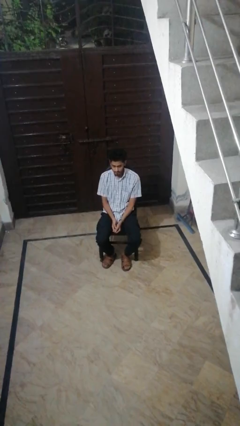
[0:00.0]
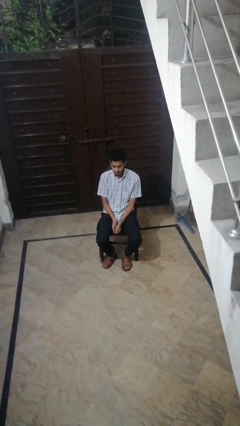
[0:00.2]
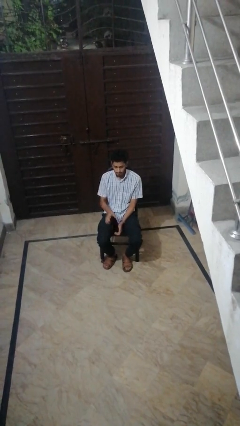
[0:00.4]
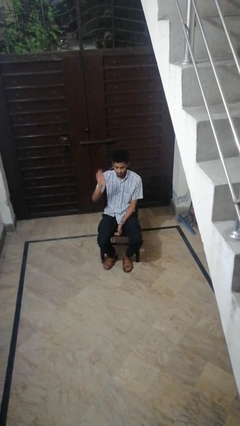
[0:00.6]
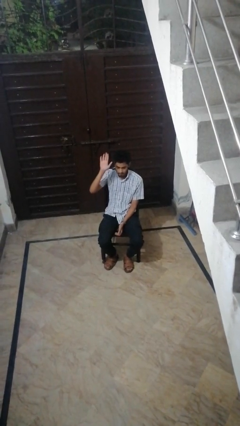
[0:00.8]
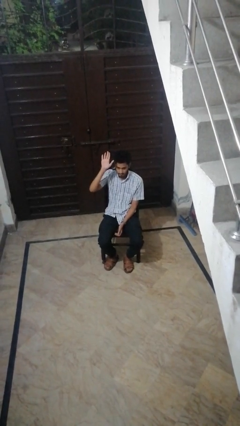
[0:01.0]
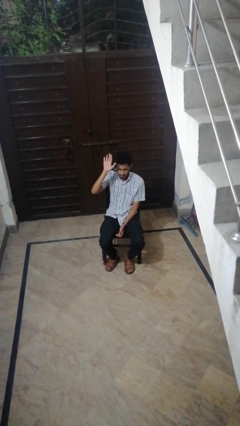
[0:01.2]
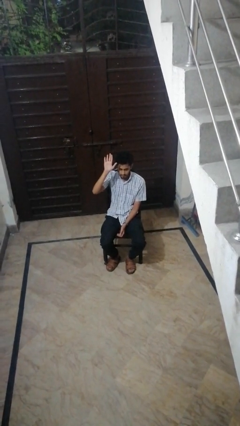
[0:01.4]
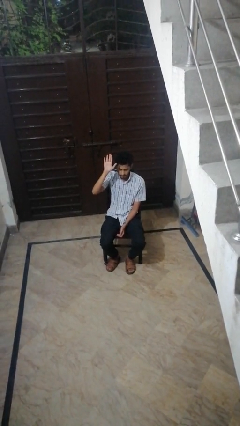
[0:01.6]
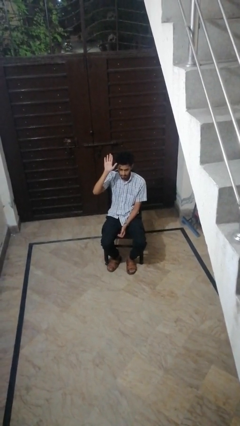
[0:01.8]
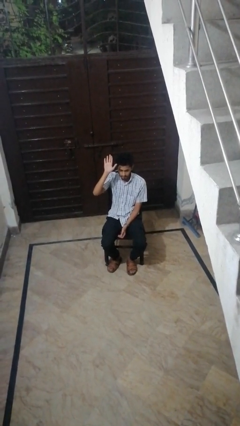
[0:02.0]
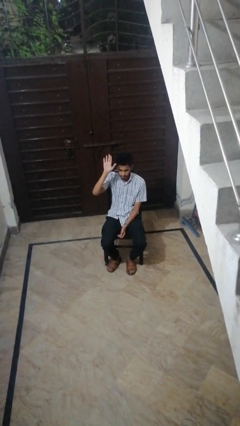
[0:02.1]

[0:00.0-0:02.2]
person gestures raise hand

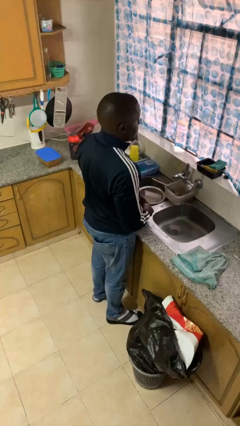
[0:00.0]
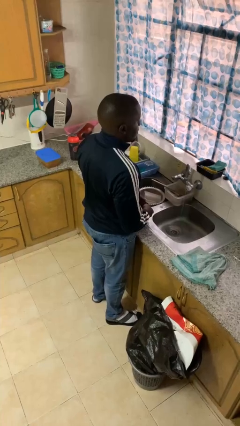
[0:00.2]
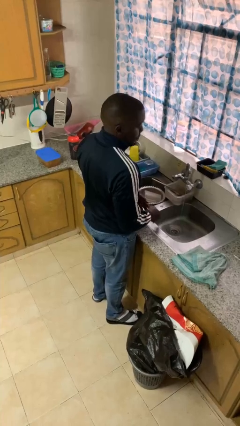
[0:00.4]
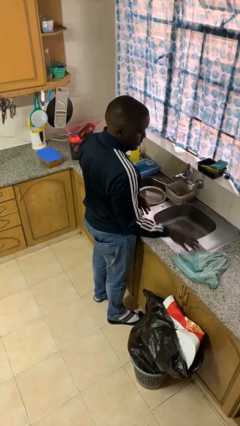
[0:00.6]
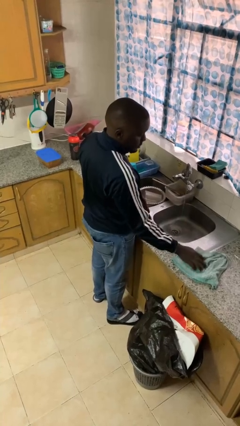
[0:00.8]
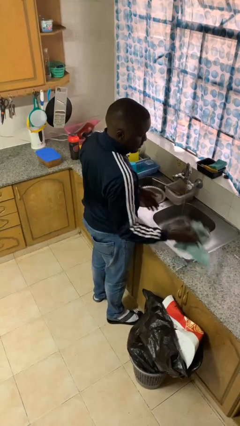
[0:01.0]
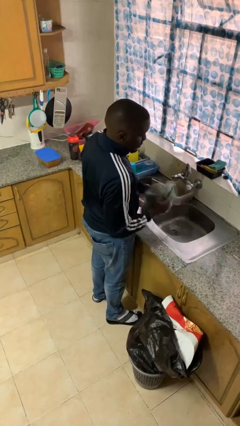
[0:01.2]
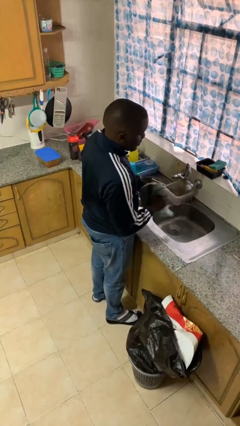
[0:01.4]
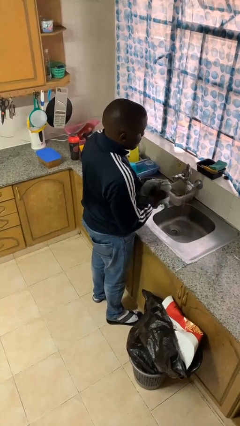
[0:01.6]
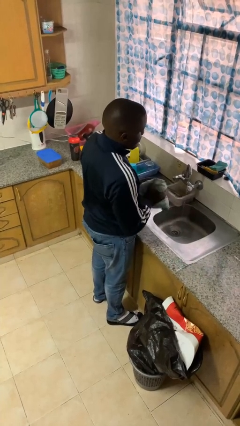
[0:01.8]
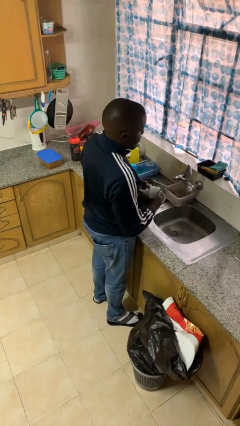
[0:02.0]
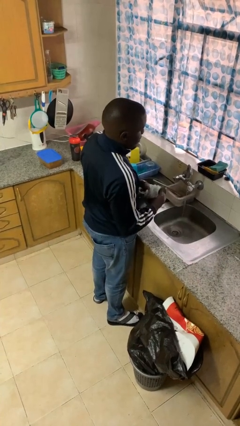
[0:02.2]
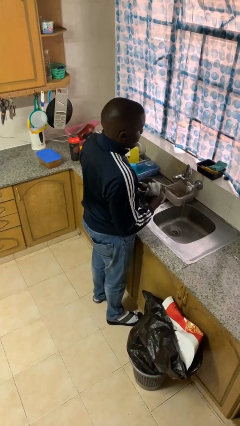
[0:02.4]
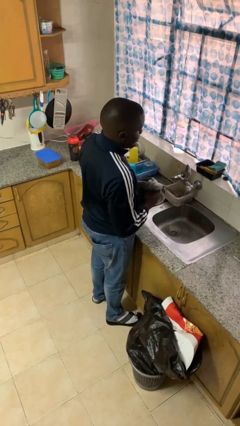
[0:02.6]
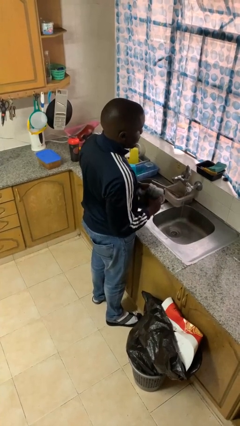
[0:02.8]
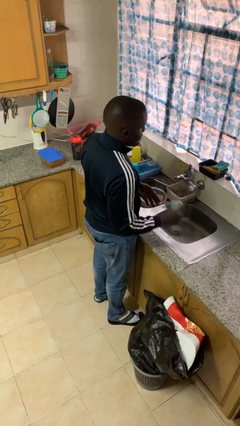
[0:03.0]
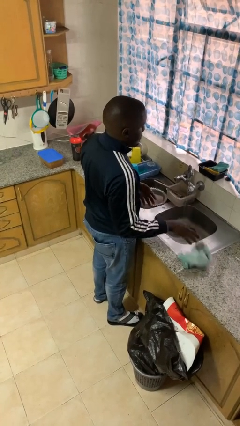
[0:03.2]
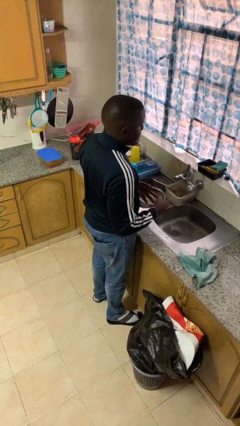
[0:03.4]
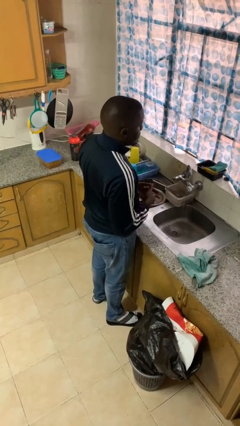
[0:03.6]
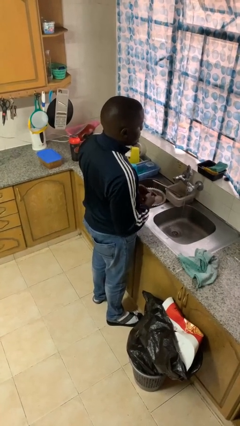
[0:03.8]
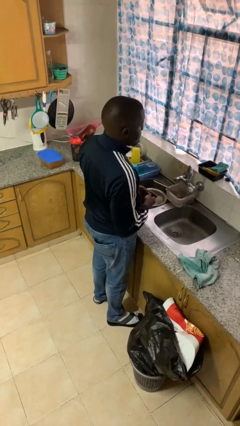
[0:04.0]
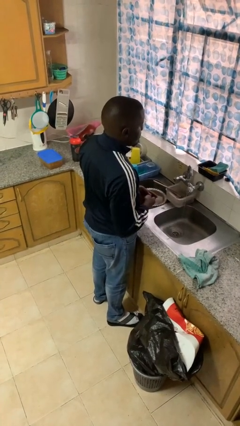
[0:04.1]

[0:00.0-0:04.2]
person dries hands with towel

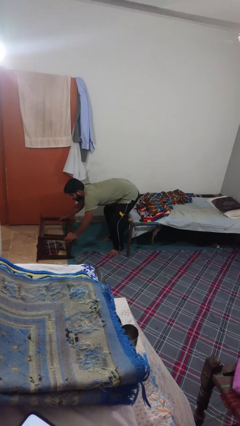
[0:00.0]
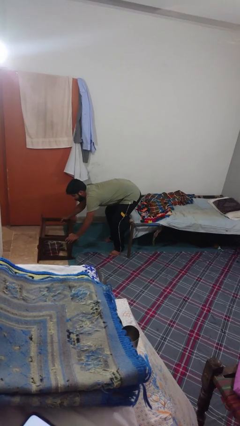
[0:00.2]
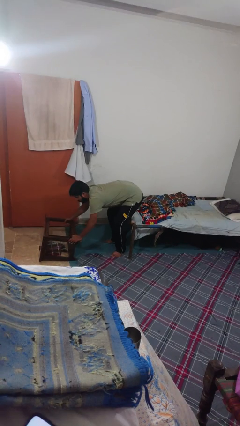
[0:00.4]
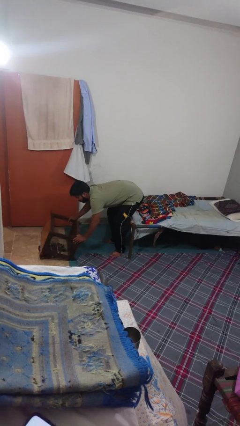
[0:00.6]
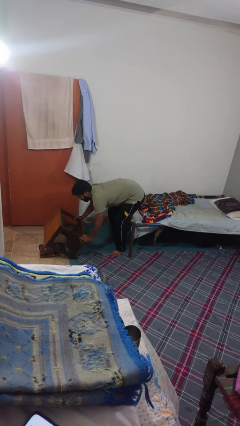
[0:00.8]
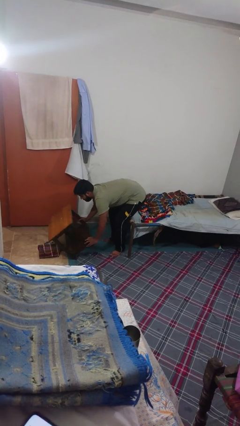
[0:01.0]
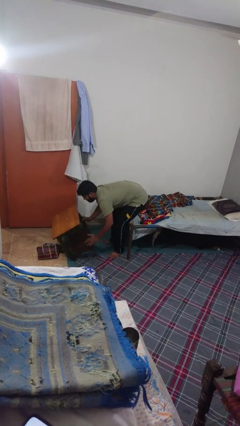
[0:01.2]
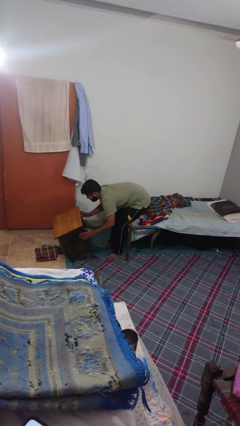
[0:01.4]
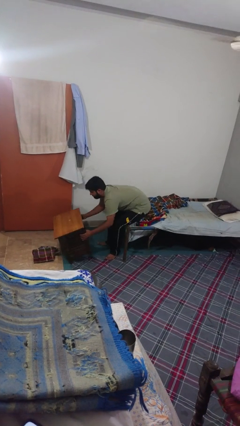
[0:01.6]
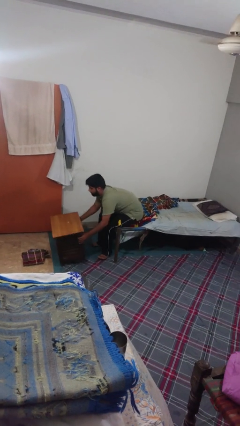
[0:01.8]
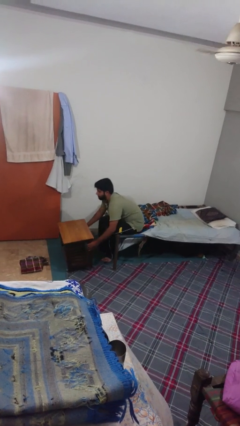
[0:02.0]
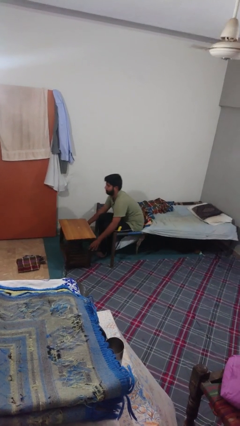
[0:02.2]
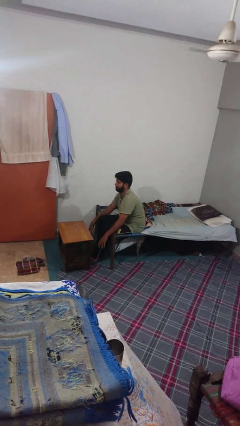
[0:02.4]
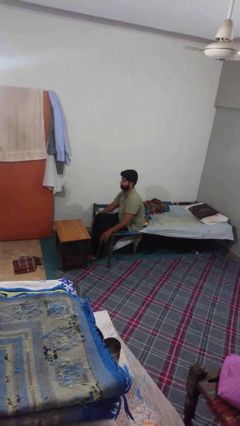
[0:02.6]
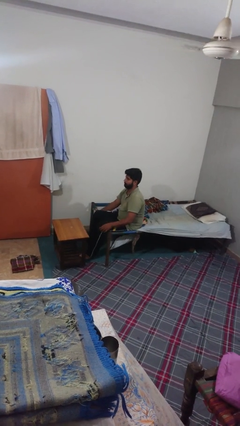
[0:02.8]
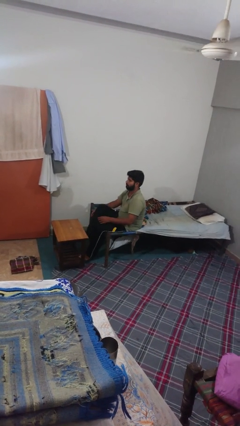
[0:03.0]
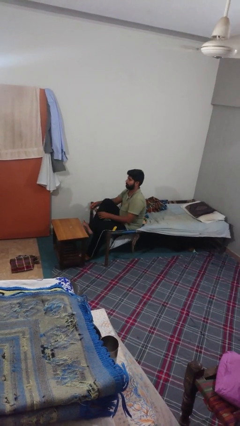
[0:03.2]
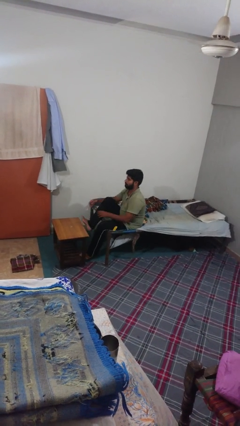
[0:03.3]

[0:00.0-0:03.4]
person sets upright furniture

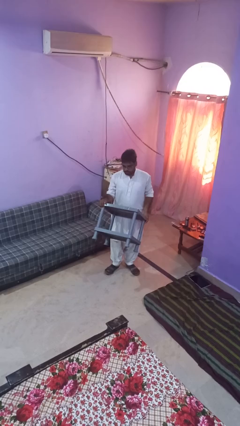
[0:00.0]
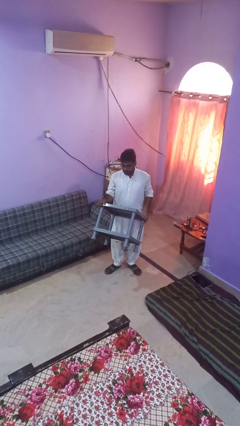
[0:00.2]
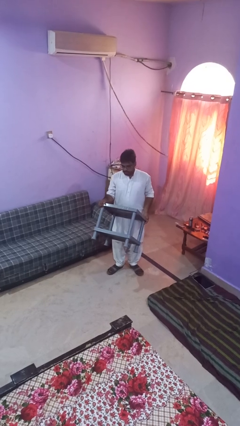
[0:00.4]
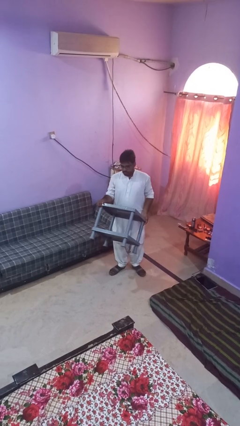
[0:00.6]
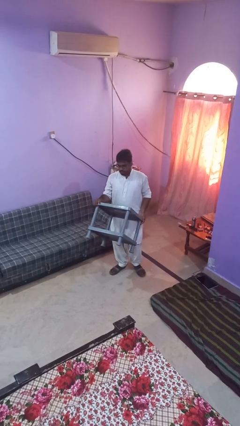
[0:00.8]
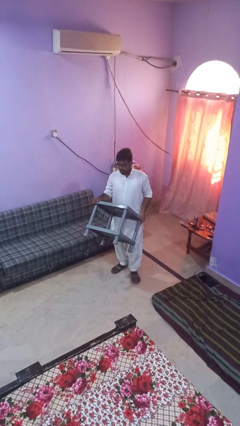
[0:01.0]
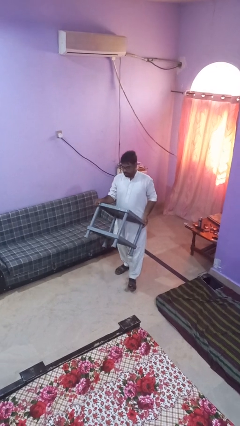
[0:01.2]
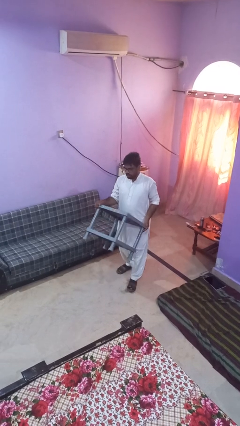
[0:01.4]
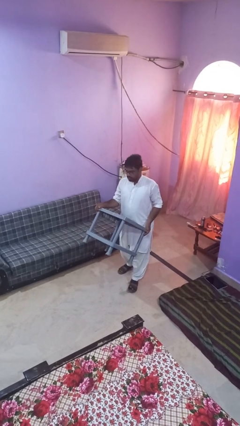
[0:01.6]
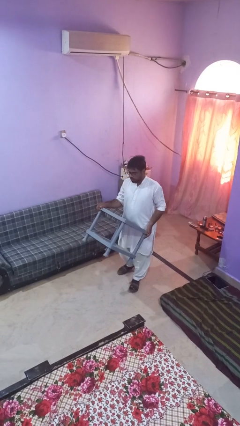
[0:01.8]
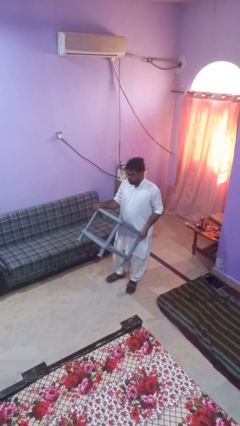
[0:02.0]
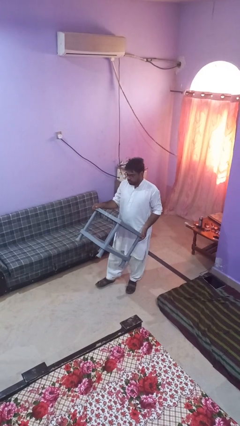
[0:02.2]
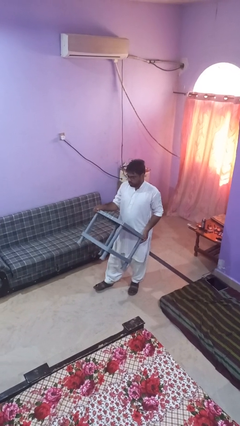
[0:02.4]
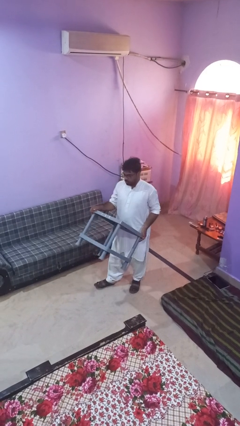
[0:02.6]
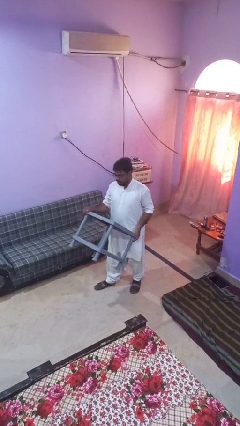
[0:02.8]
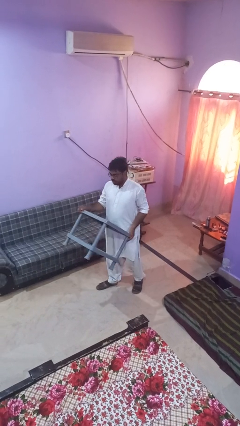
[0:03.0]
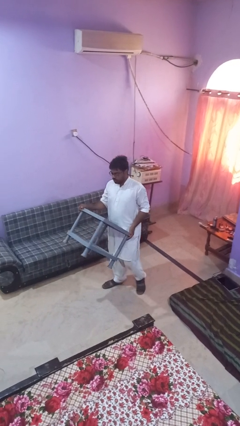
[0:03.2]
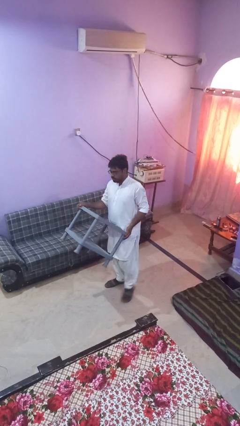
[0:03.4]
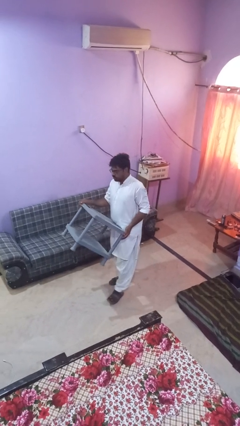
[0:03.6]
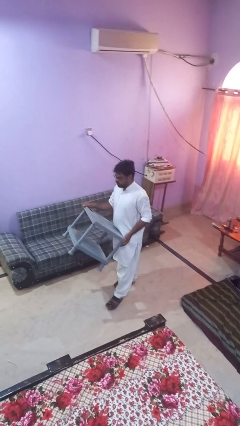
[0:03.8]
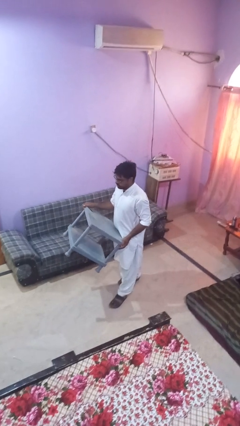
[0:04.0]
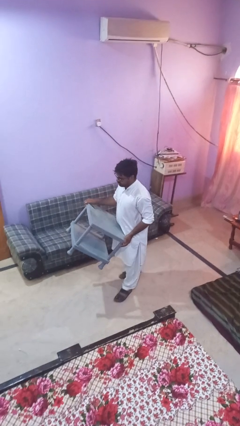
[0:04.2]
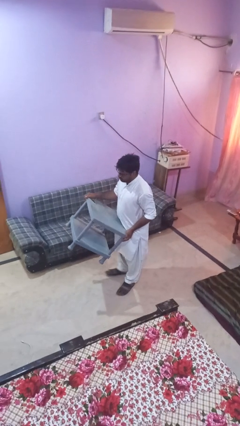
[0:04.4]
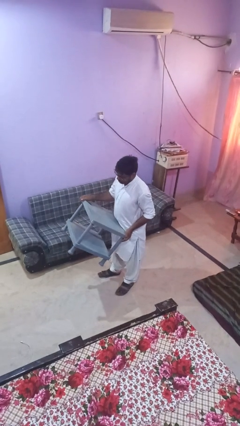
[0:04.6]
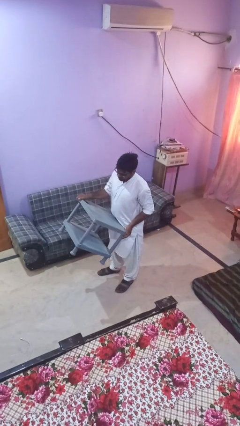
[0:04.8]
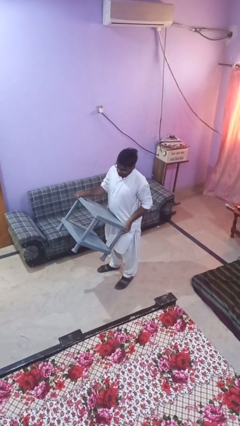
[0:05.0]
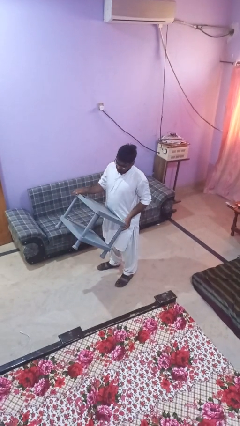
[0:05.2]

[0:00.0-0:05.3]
person carries furniture

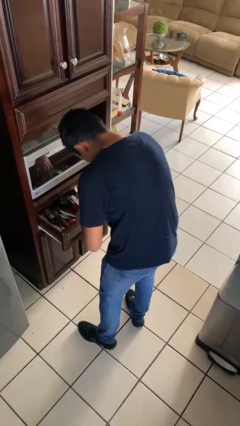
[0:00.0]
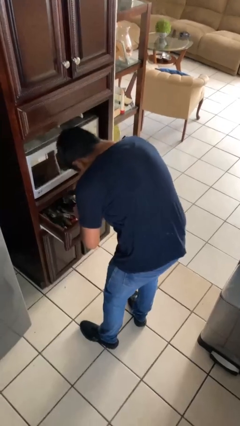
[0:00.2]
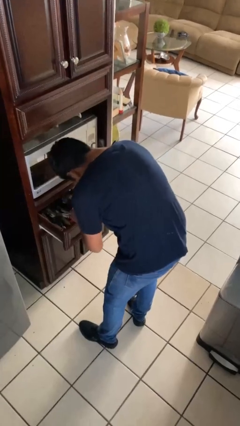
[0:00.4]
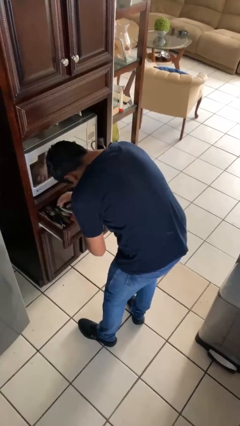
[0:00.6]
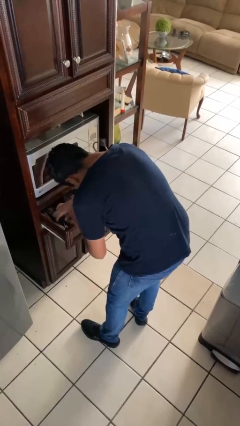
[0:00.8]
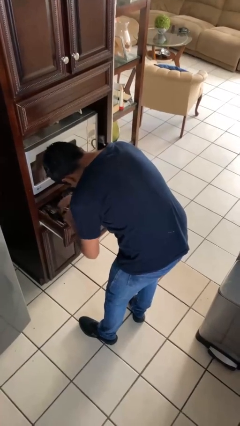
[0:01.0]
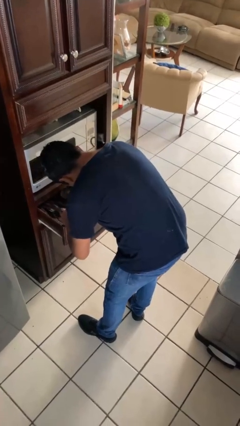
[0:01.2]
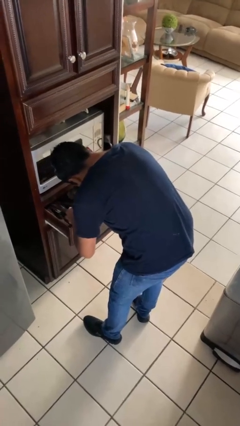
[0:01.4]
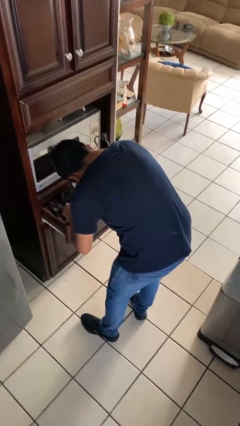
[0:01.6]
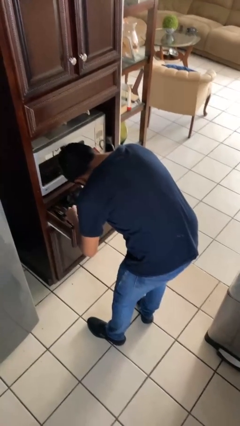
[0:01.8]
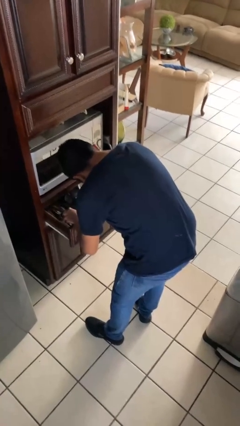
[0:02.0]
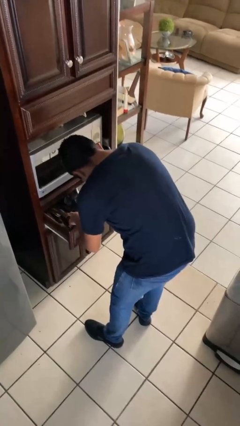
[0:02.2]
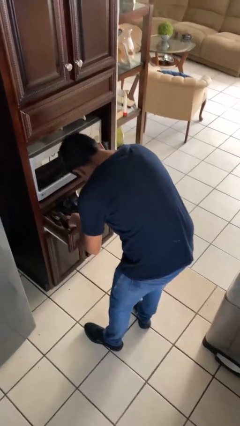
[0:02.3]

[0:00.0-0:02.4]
person searches in kitchen drawer

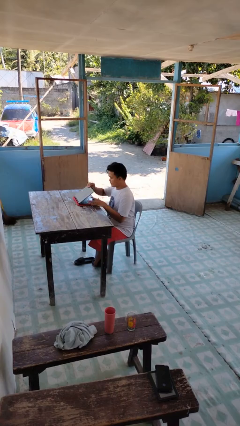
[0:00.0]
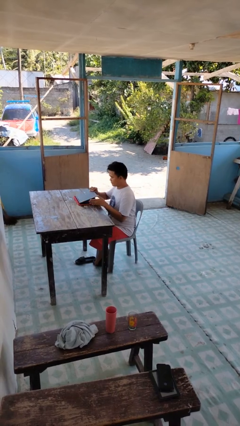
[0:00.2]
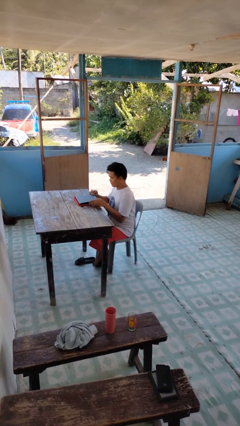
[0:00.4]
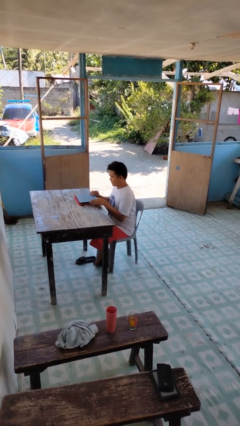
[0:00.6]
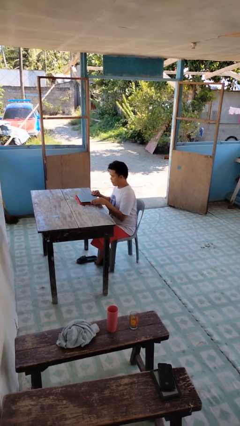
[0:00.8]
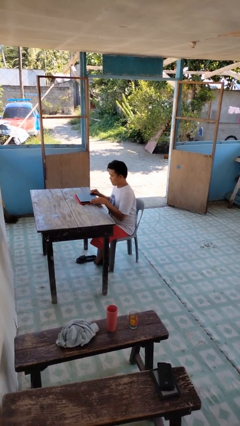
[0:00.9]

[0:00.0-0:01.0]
person closes laptop
